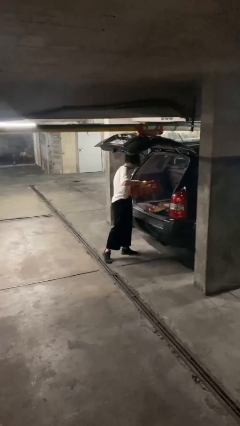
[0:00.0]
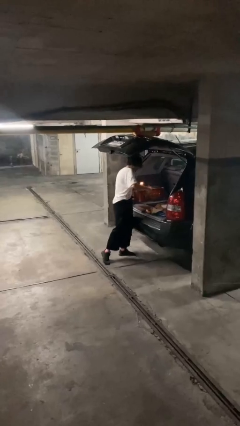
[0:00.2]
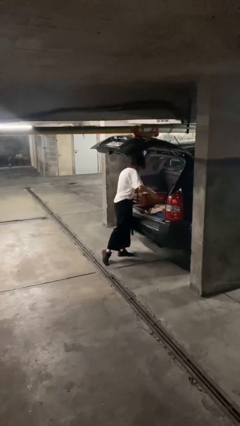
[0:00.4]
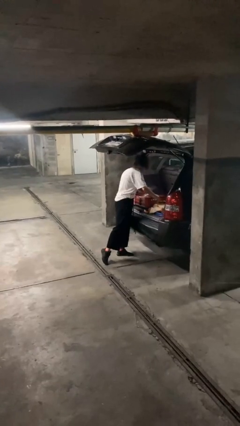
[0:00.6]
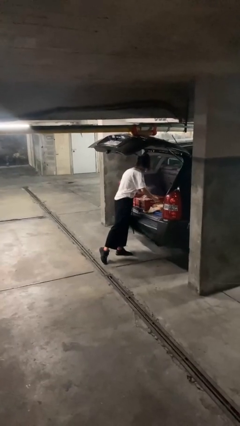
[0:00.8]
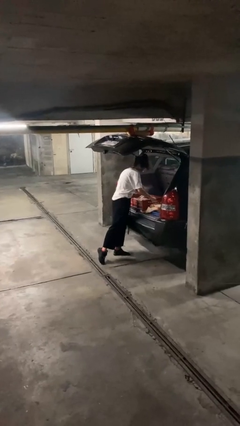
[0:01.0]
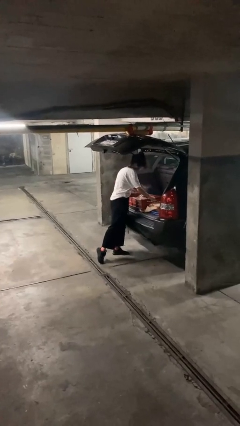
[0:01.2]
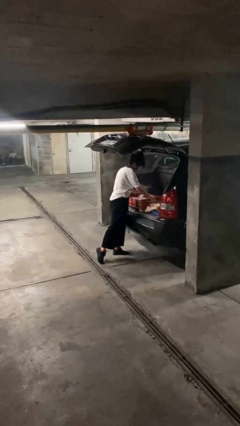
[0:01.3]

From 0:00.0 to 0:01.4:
person loads car

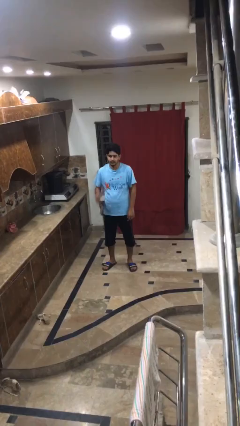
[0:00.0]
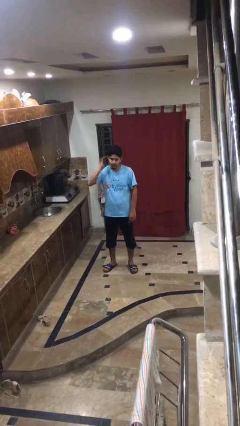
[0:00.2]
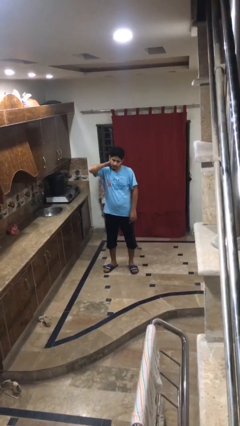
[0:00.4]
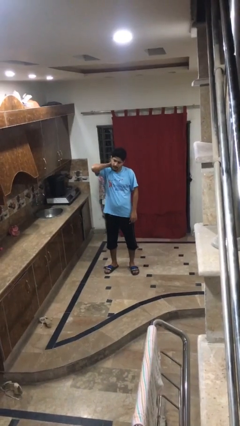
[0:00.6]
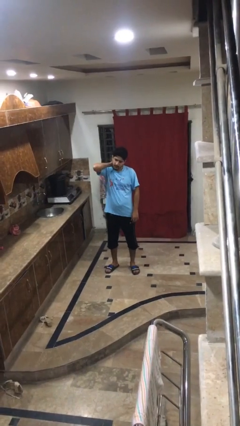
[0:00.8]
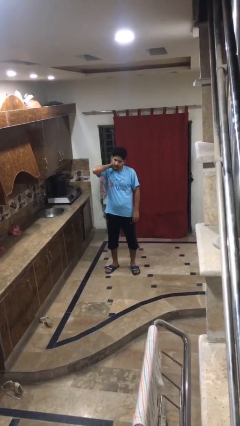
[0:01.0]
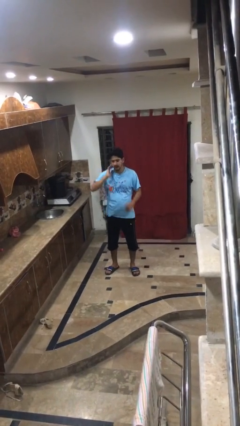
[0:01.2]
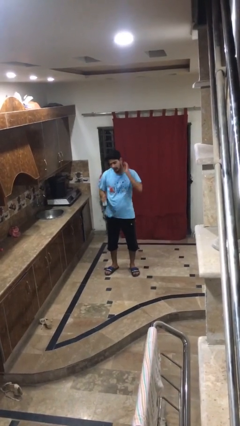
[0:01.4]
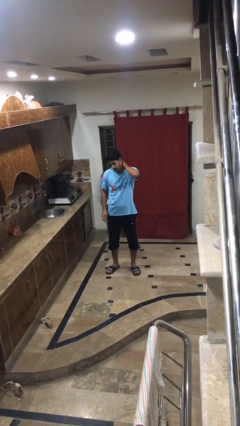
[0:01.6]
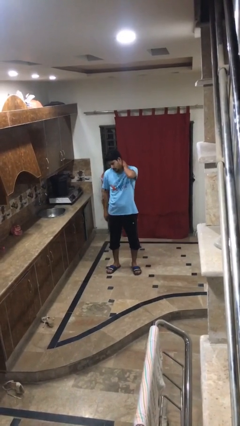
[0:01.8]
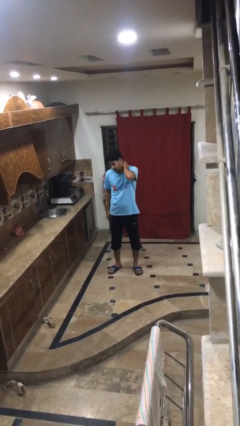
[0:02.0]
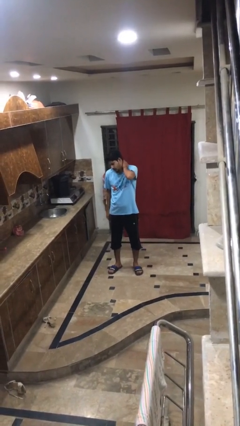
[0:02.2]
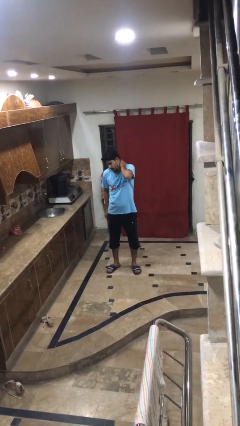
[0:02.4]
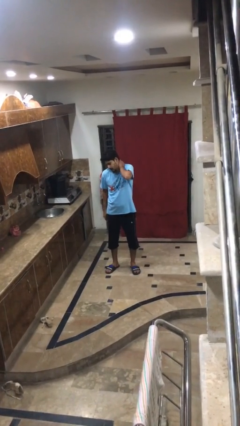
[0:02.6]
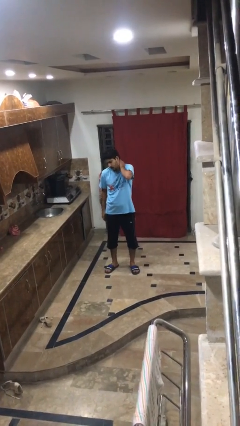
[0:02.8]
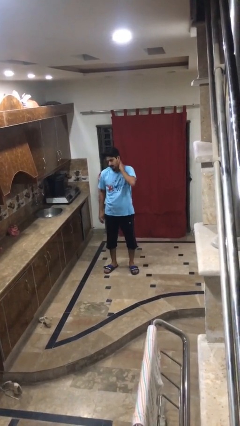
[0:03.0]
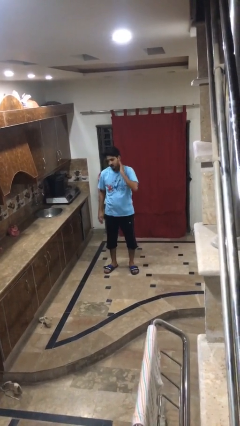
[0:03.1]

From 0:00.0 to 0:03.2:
person rubs neck

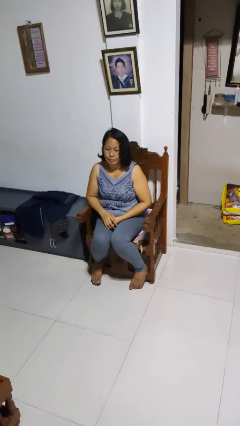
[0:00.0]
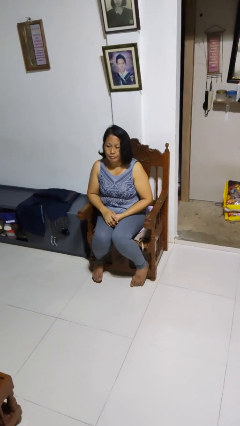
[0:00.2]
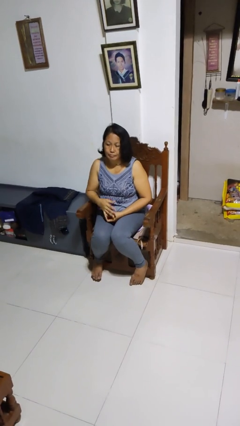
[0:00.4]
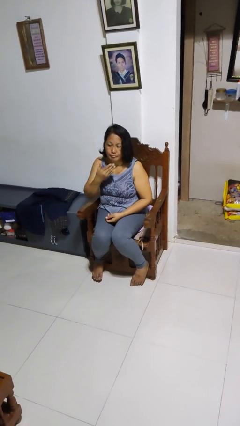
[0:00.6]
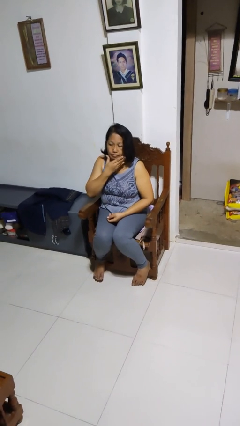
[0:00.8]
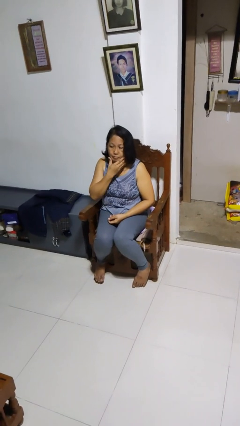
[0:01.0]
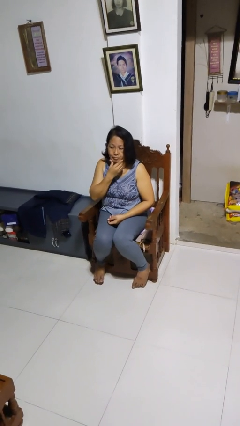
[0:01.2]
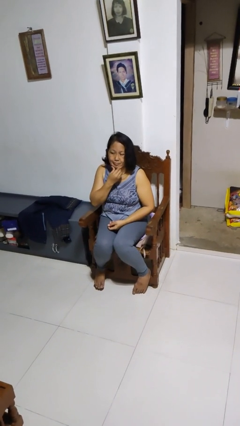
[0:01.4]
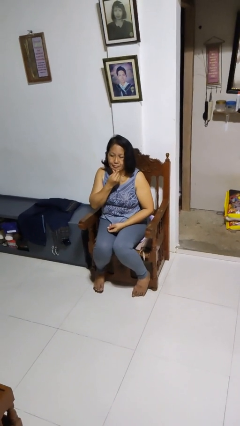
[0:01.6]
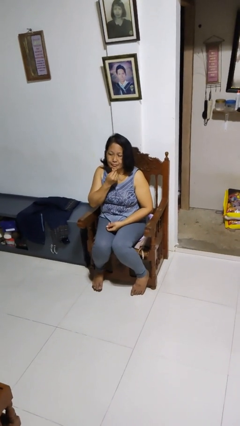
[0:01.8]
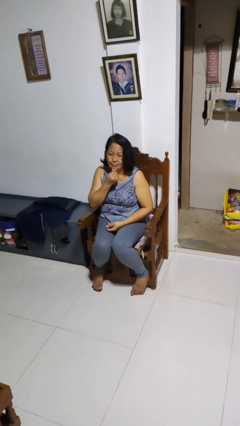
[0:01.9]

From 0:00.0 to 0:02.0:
person strokes chin

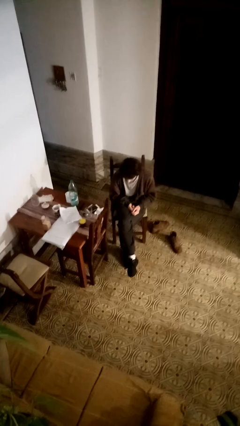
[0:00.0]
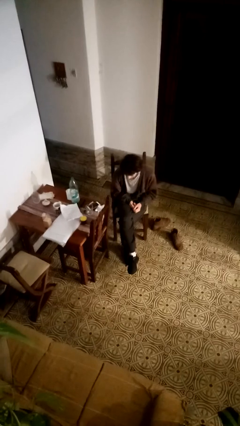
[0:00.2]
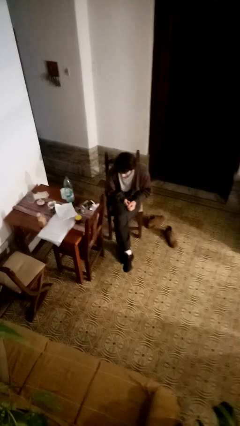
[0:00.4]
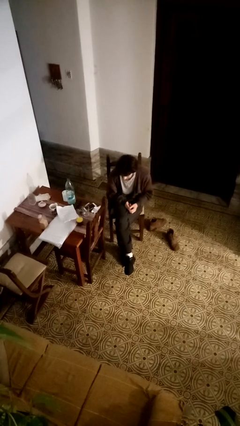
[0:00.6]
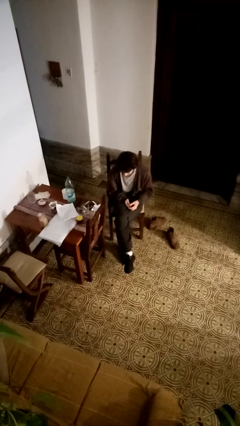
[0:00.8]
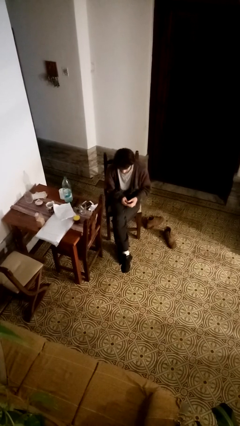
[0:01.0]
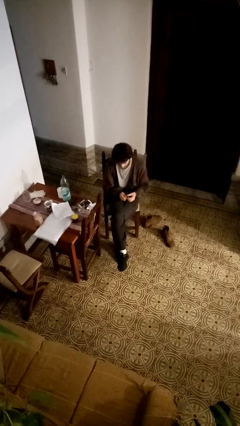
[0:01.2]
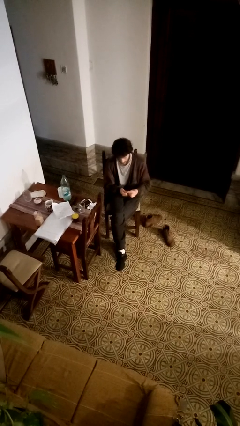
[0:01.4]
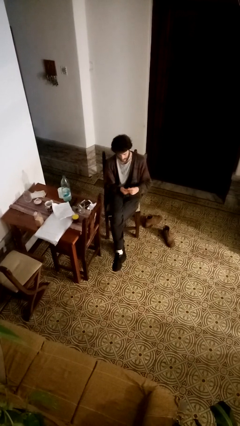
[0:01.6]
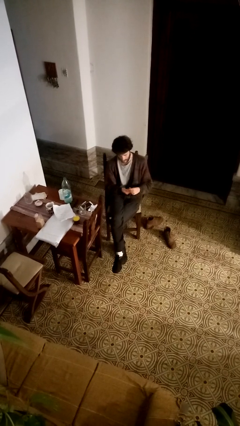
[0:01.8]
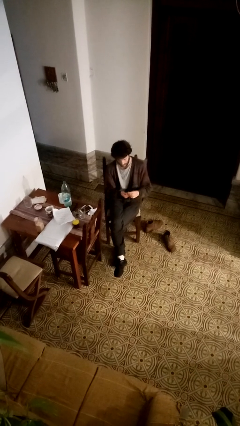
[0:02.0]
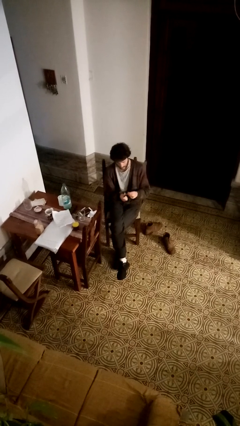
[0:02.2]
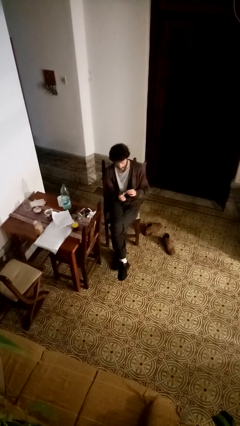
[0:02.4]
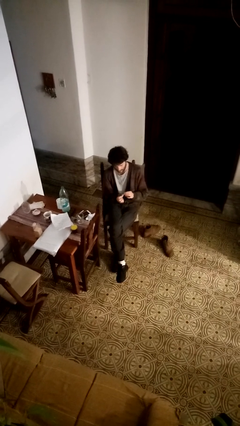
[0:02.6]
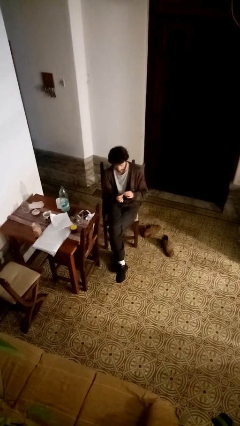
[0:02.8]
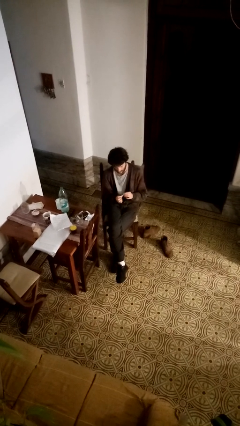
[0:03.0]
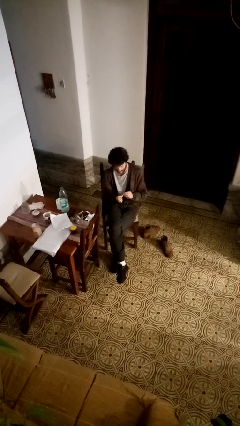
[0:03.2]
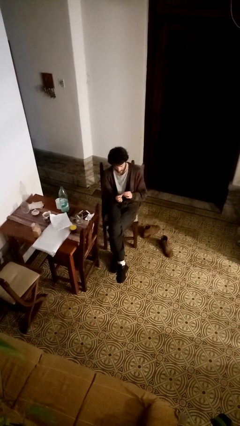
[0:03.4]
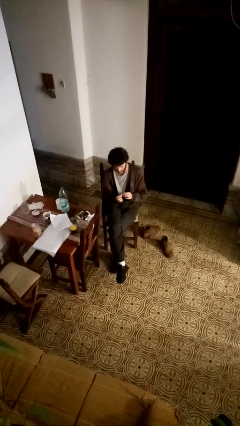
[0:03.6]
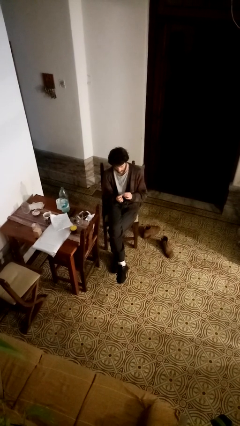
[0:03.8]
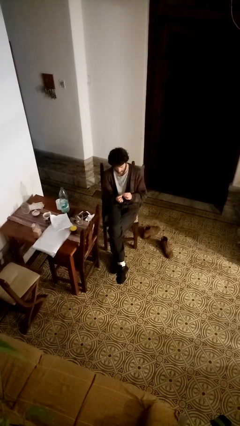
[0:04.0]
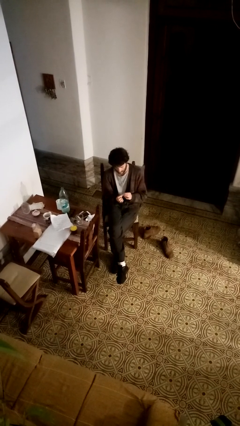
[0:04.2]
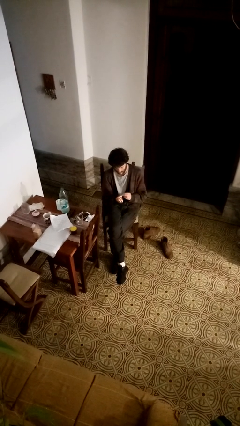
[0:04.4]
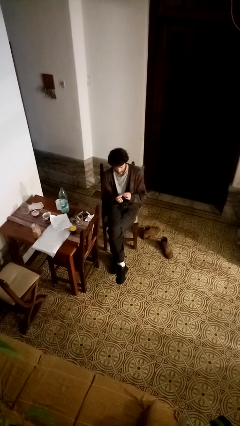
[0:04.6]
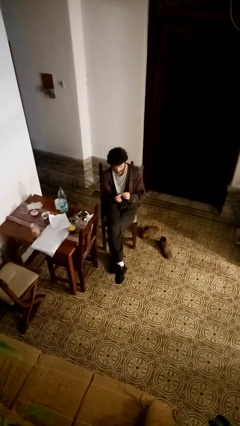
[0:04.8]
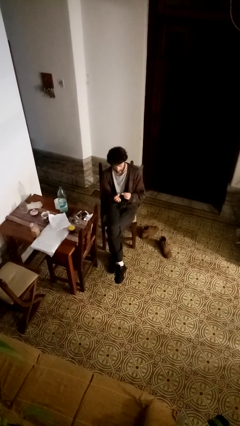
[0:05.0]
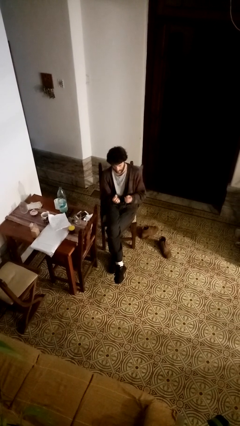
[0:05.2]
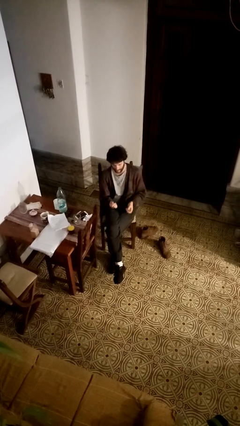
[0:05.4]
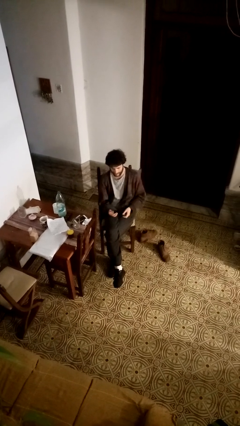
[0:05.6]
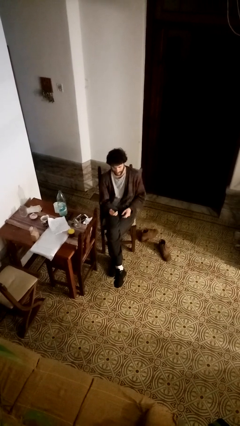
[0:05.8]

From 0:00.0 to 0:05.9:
person clips fingernails

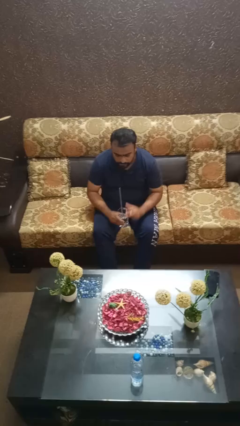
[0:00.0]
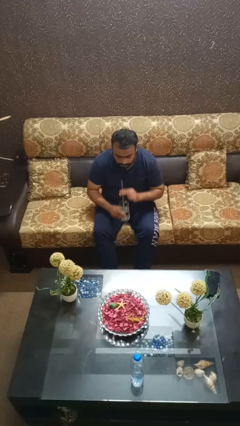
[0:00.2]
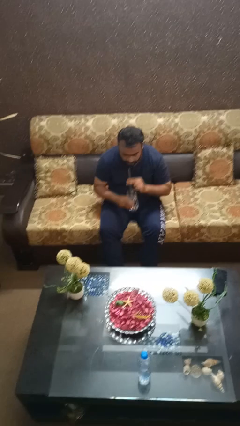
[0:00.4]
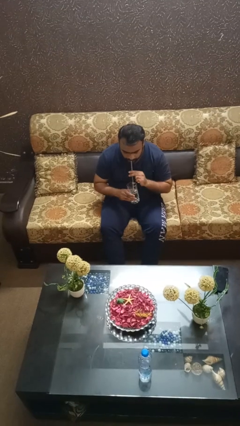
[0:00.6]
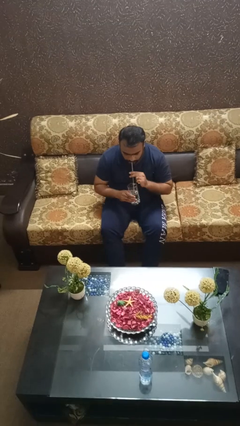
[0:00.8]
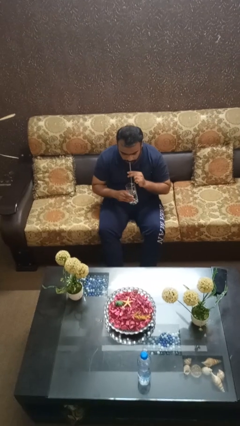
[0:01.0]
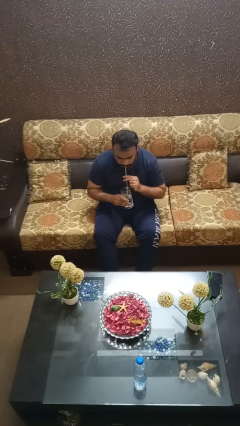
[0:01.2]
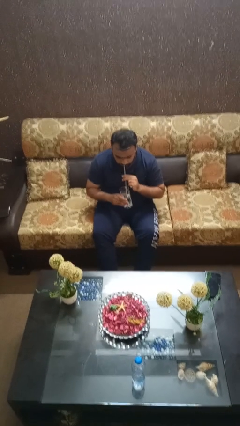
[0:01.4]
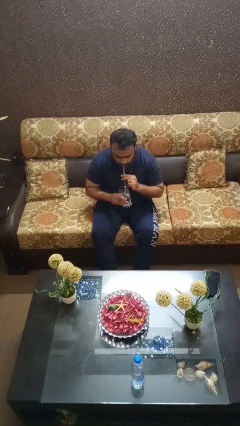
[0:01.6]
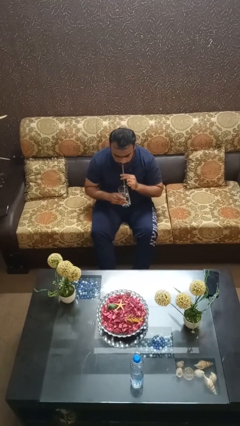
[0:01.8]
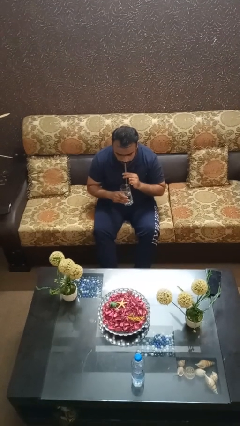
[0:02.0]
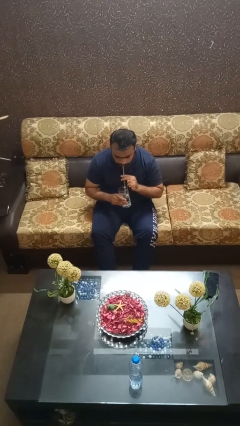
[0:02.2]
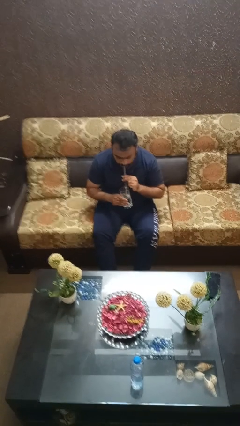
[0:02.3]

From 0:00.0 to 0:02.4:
person drinks from straw

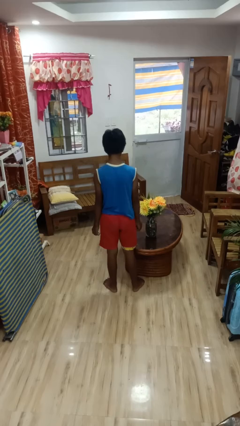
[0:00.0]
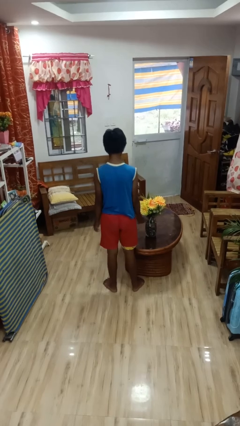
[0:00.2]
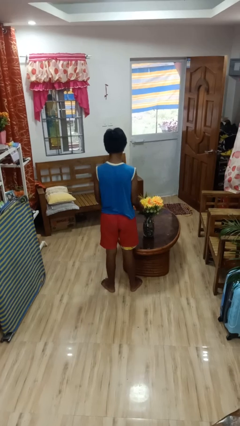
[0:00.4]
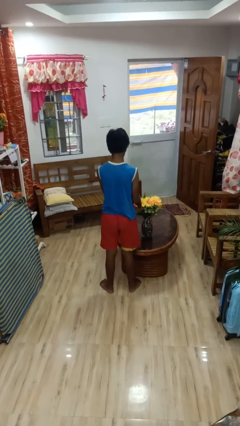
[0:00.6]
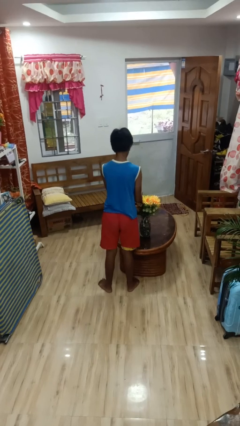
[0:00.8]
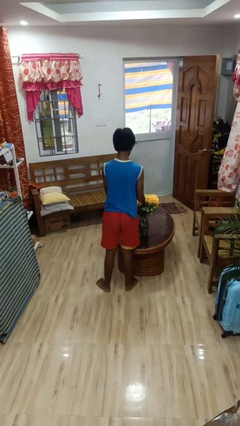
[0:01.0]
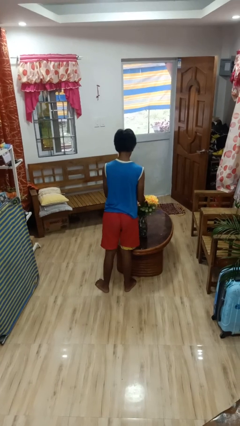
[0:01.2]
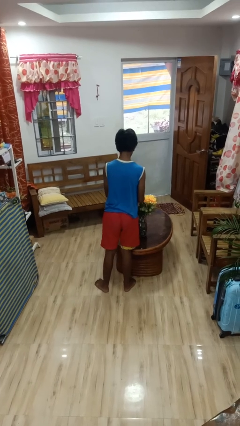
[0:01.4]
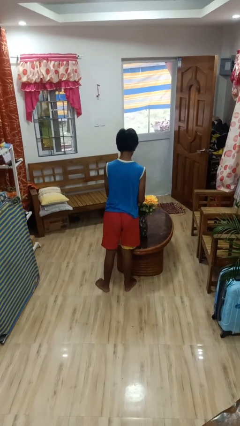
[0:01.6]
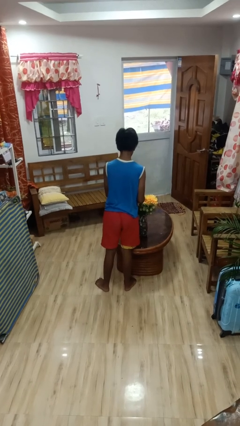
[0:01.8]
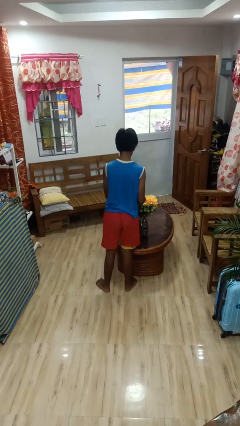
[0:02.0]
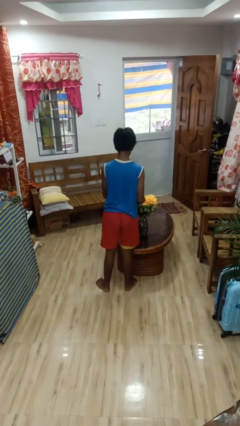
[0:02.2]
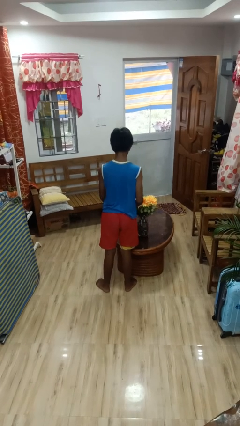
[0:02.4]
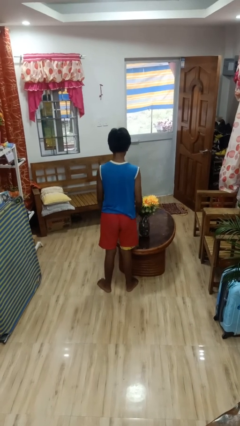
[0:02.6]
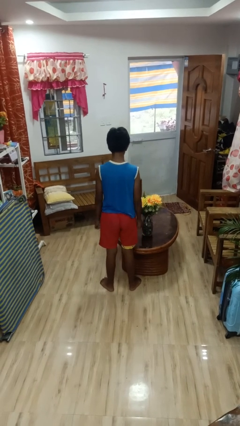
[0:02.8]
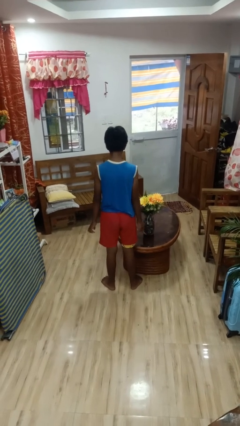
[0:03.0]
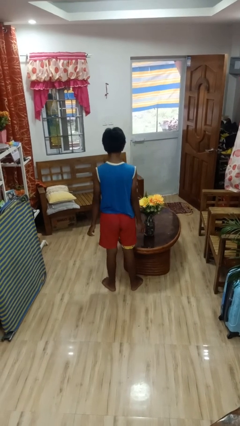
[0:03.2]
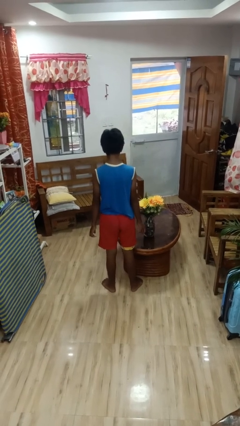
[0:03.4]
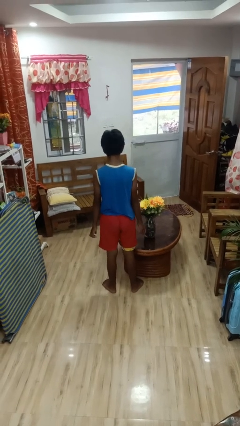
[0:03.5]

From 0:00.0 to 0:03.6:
person arranges flowers in vase
